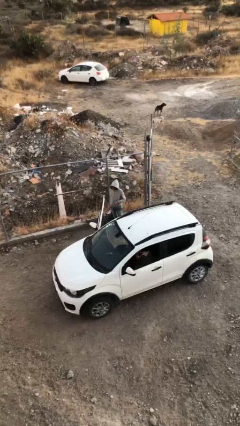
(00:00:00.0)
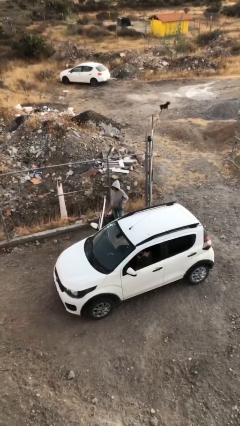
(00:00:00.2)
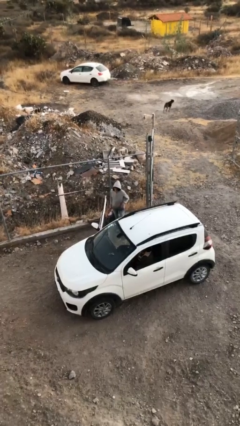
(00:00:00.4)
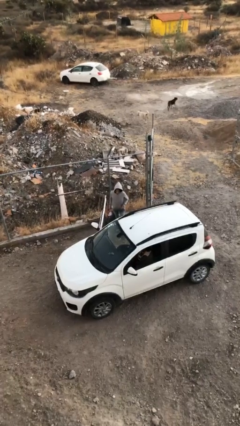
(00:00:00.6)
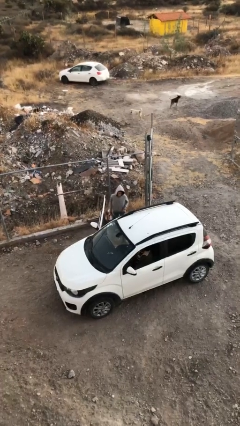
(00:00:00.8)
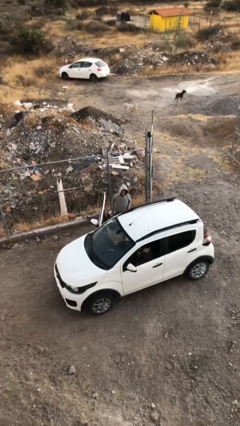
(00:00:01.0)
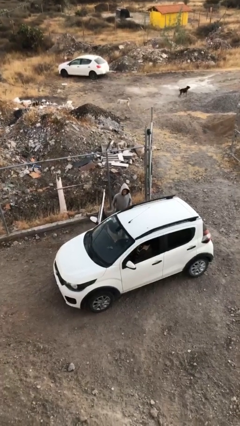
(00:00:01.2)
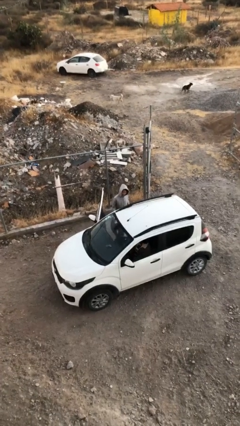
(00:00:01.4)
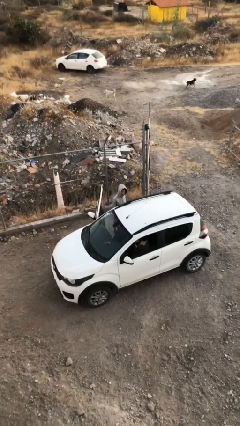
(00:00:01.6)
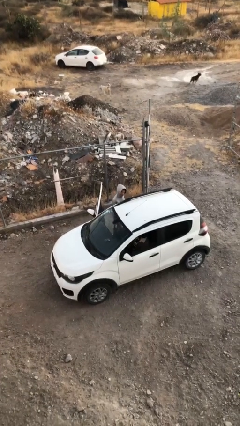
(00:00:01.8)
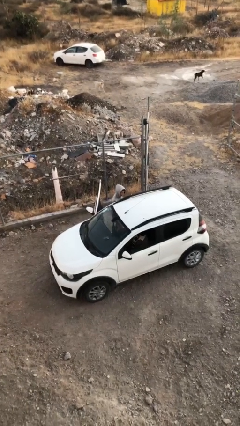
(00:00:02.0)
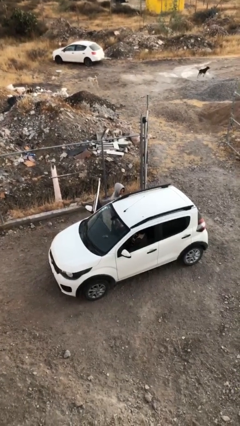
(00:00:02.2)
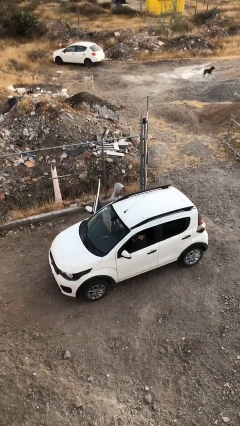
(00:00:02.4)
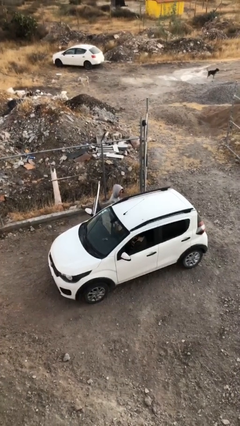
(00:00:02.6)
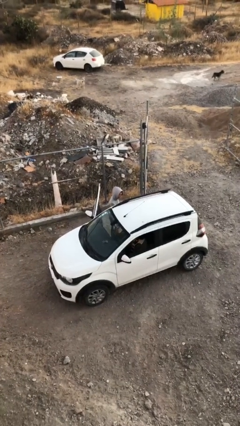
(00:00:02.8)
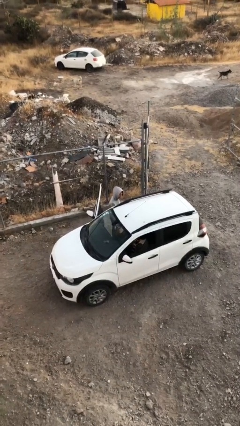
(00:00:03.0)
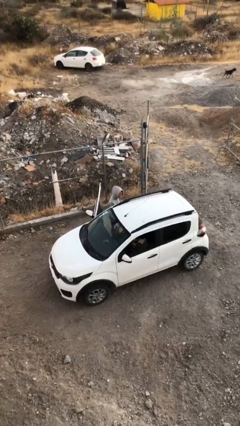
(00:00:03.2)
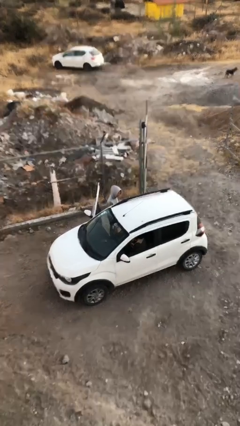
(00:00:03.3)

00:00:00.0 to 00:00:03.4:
person loads car

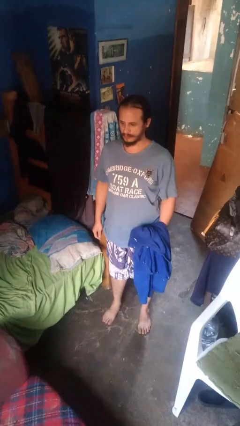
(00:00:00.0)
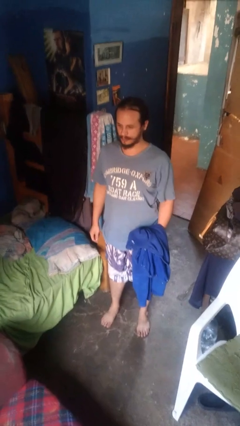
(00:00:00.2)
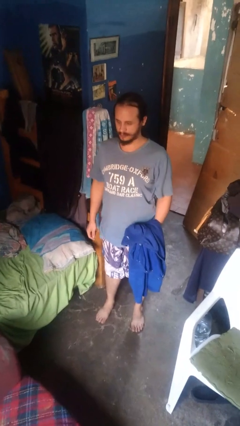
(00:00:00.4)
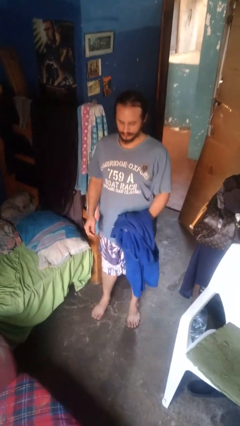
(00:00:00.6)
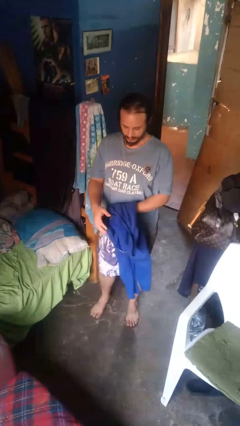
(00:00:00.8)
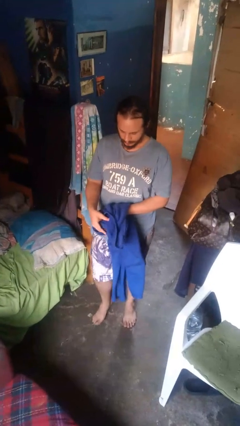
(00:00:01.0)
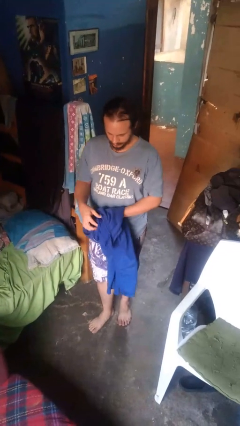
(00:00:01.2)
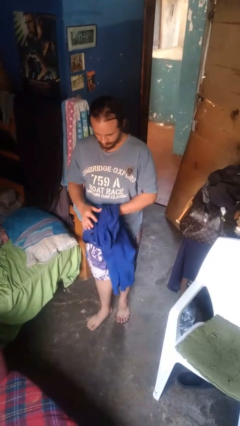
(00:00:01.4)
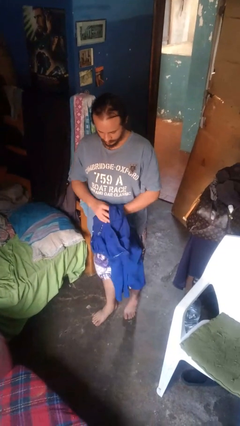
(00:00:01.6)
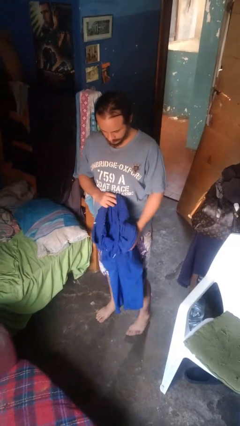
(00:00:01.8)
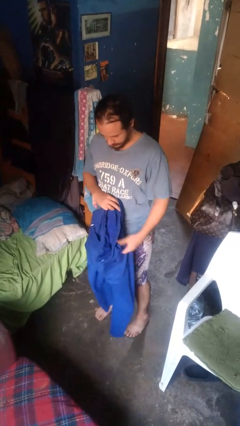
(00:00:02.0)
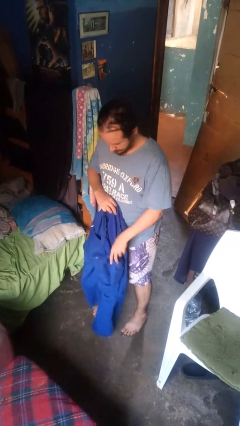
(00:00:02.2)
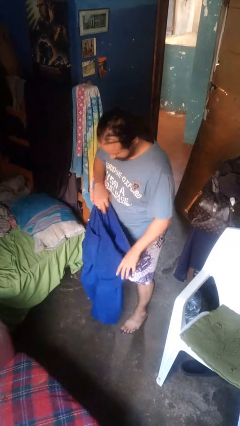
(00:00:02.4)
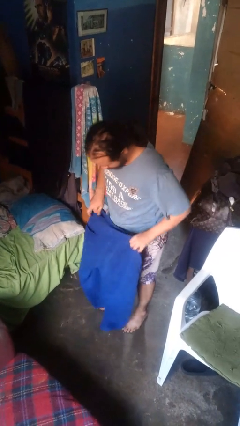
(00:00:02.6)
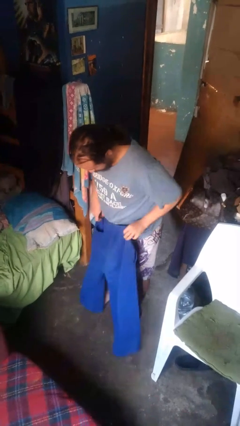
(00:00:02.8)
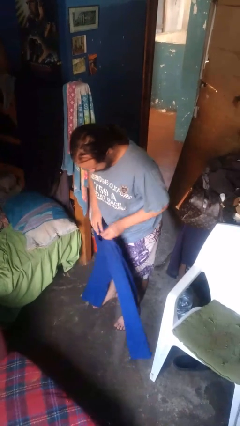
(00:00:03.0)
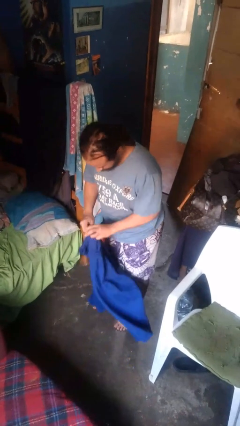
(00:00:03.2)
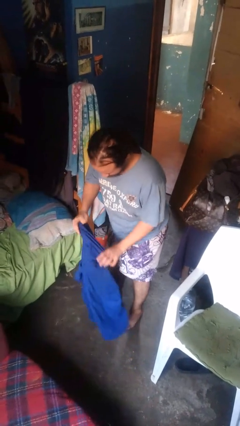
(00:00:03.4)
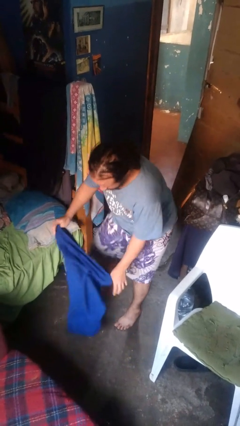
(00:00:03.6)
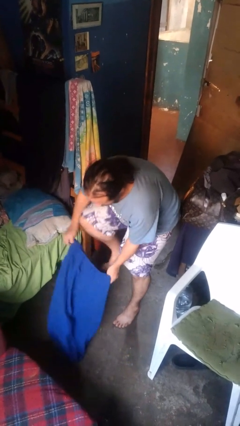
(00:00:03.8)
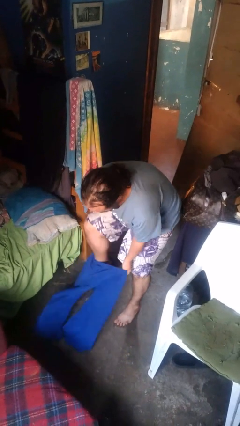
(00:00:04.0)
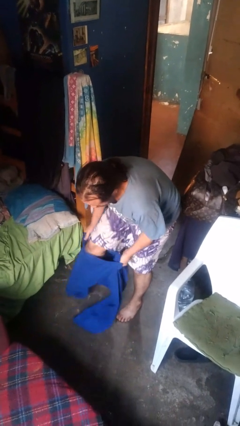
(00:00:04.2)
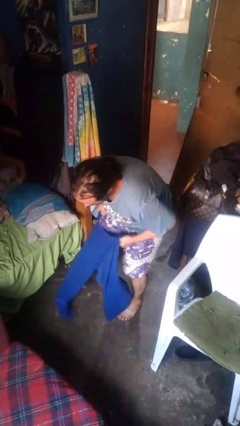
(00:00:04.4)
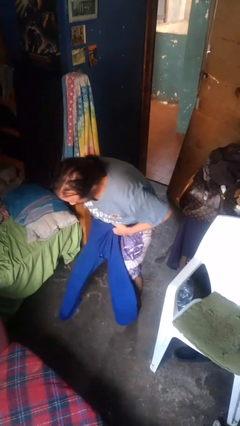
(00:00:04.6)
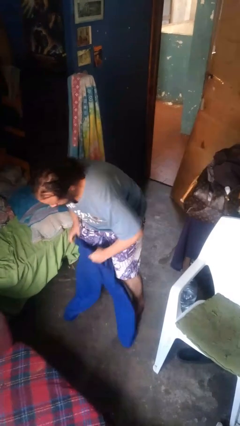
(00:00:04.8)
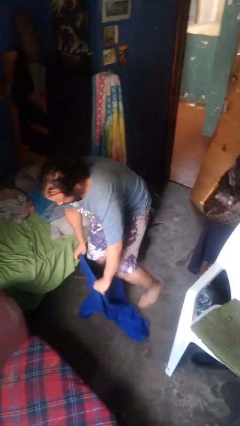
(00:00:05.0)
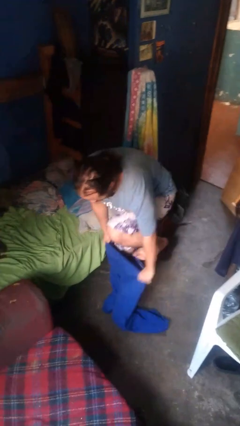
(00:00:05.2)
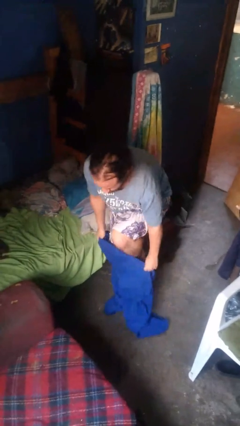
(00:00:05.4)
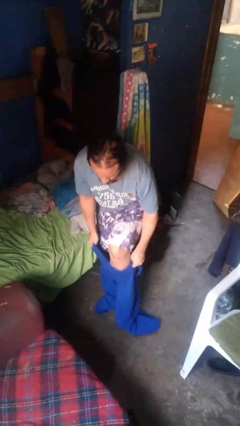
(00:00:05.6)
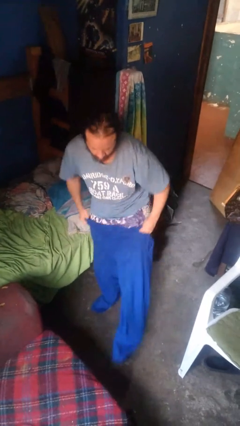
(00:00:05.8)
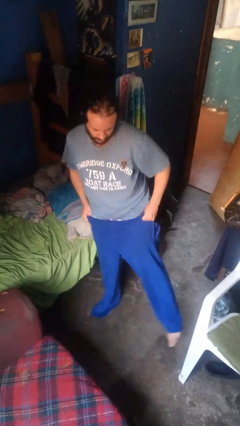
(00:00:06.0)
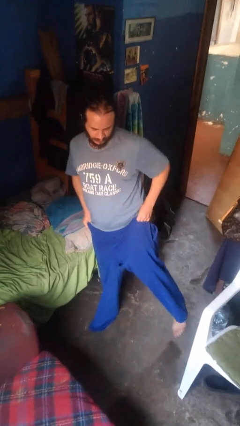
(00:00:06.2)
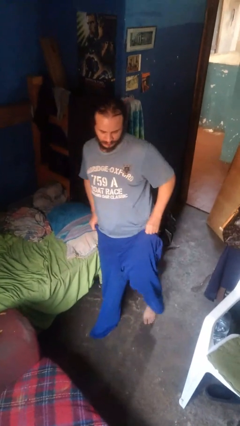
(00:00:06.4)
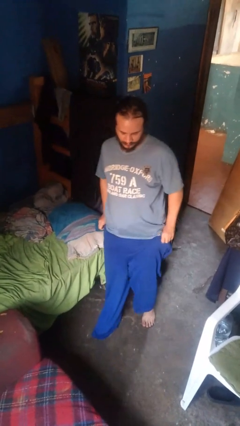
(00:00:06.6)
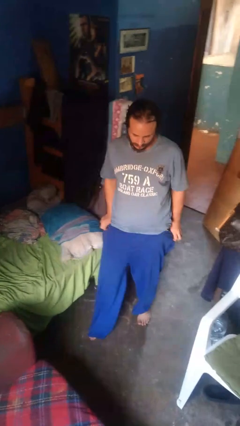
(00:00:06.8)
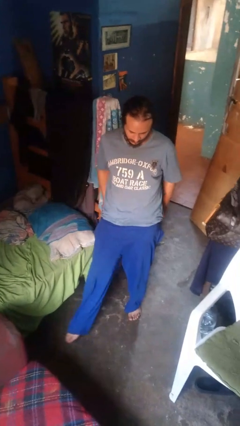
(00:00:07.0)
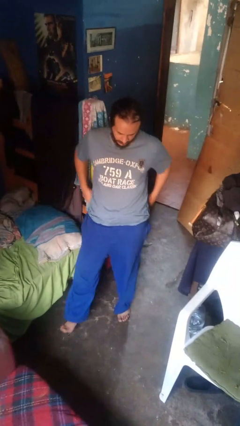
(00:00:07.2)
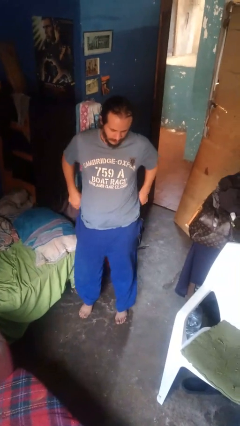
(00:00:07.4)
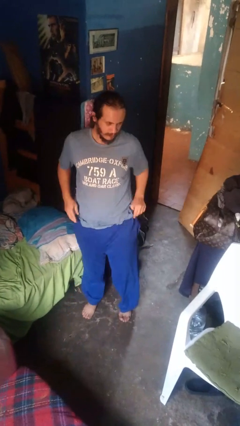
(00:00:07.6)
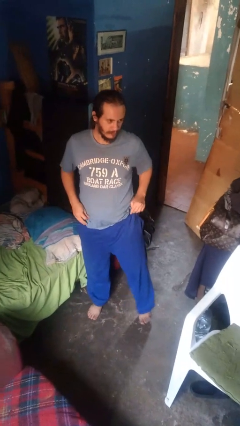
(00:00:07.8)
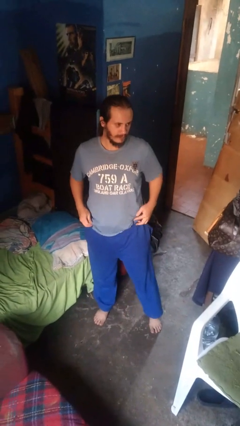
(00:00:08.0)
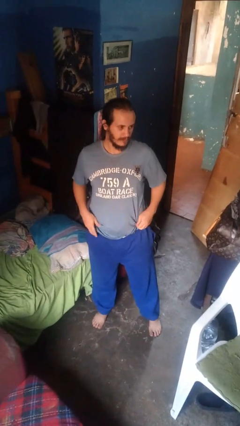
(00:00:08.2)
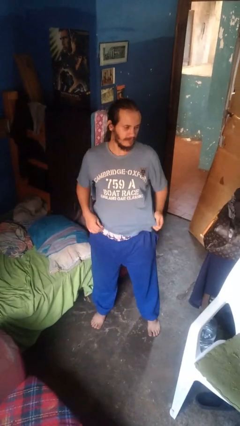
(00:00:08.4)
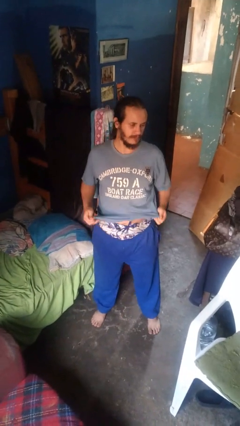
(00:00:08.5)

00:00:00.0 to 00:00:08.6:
person puts on pants

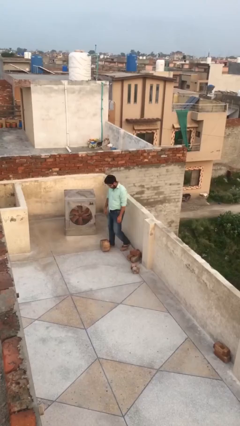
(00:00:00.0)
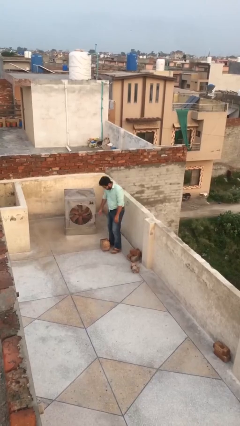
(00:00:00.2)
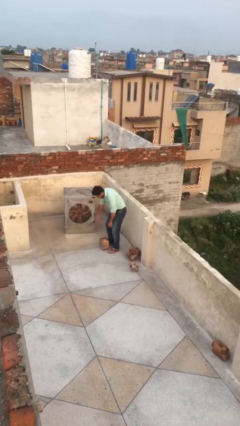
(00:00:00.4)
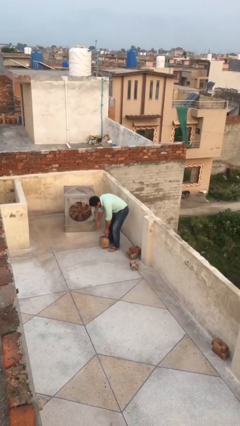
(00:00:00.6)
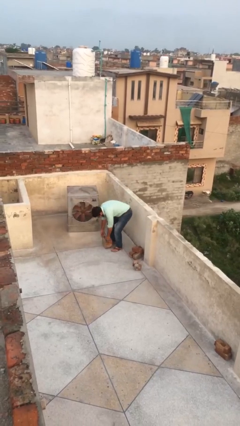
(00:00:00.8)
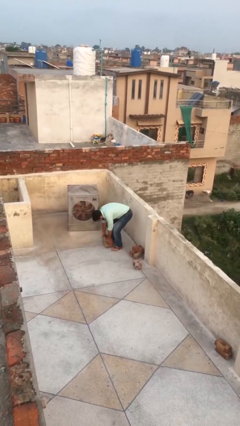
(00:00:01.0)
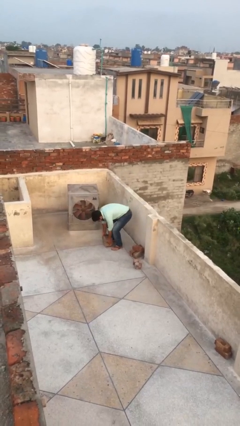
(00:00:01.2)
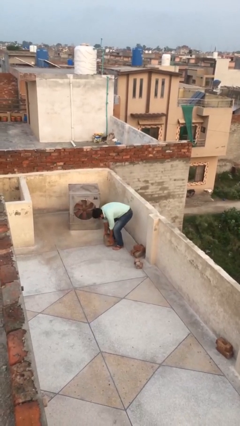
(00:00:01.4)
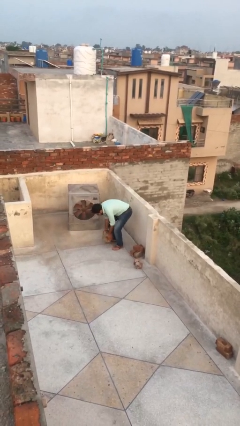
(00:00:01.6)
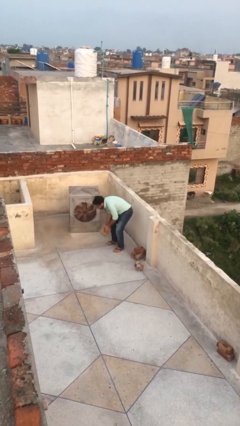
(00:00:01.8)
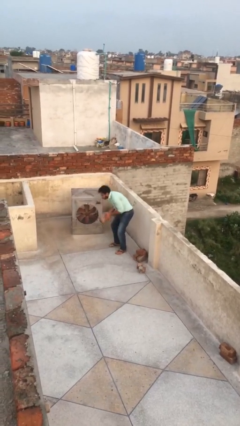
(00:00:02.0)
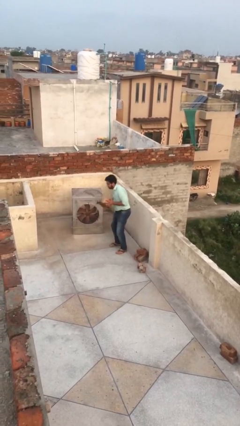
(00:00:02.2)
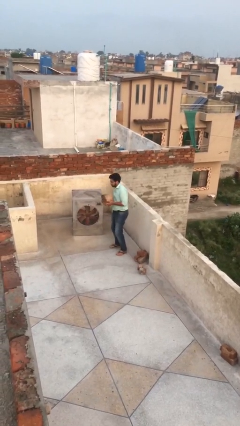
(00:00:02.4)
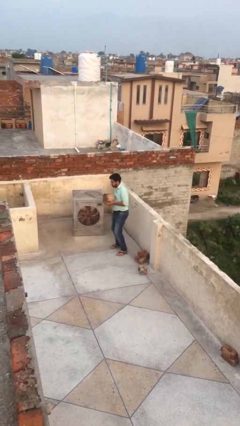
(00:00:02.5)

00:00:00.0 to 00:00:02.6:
person picks up object from floor

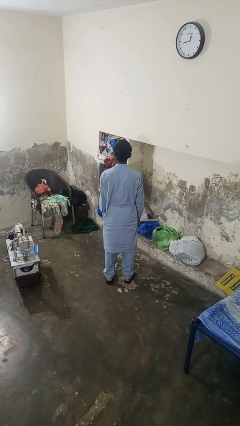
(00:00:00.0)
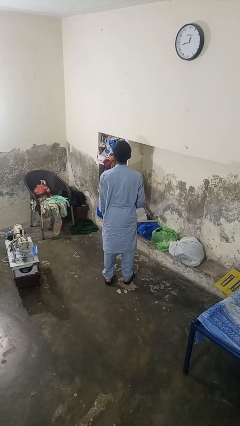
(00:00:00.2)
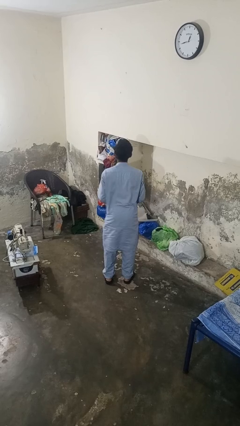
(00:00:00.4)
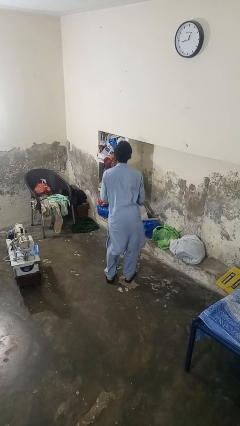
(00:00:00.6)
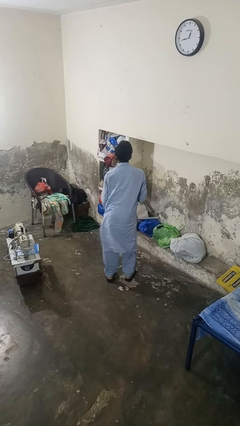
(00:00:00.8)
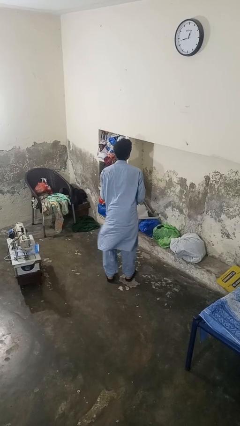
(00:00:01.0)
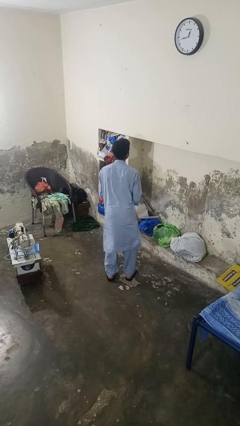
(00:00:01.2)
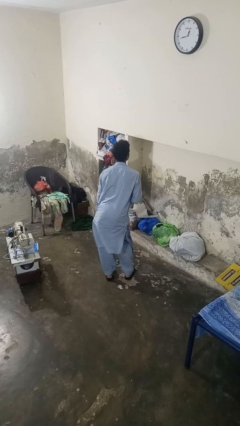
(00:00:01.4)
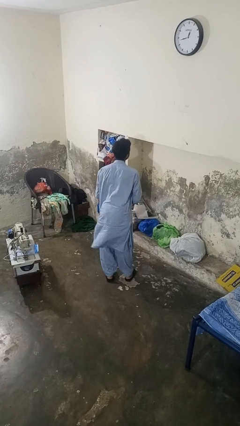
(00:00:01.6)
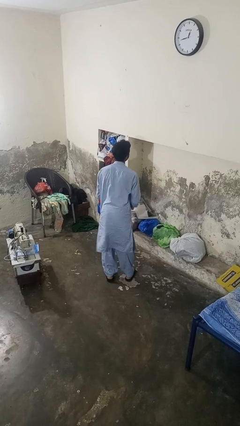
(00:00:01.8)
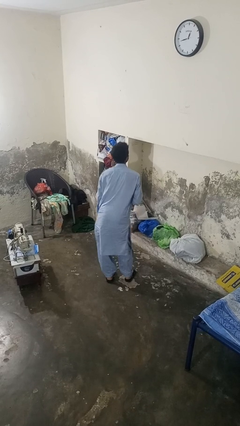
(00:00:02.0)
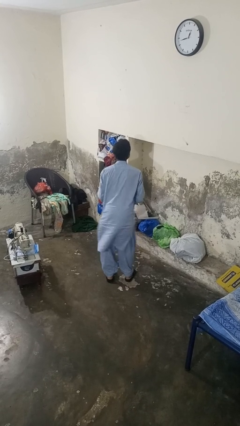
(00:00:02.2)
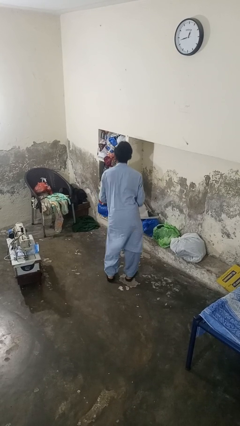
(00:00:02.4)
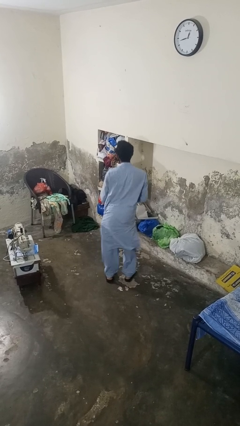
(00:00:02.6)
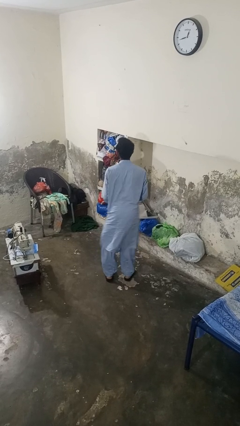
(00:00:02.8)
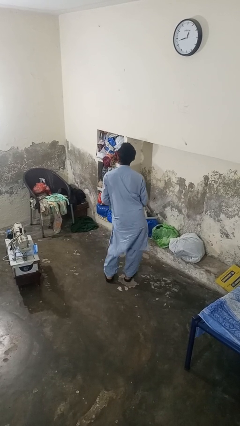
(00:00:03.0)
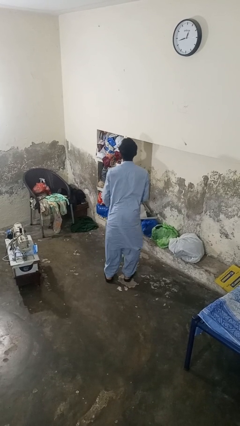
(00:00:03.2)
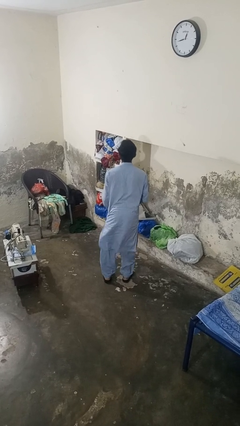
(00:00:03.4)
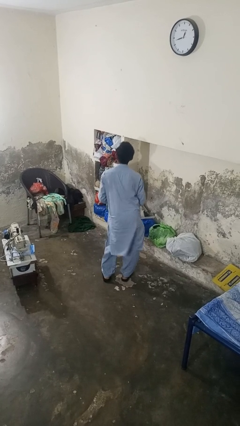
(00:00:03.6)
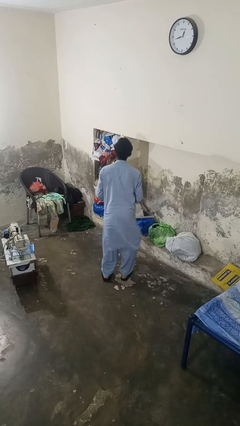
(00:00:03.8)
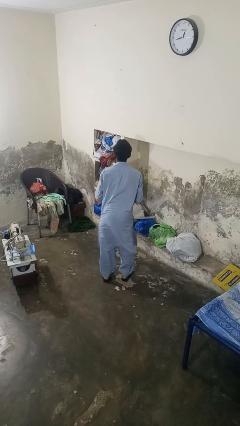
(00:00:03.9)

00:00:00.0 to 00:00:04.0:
person wiggles hips
